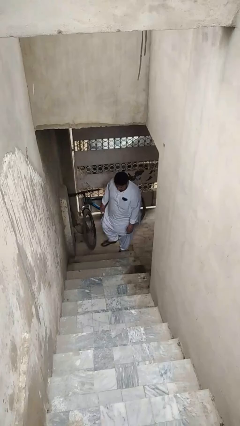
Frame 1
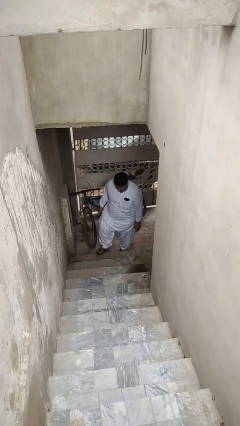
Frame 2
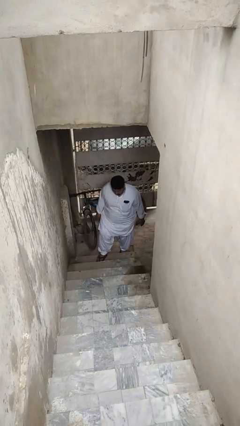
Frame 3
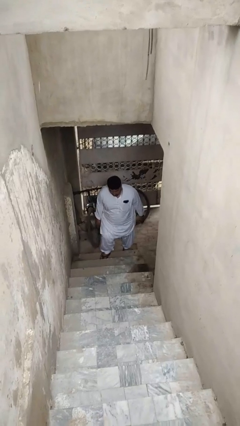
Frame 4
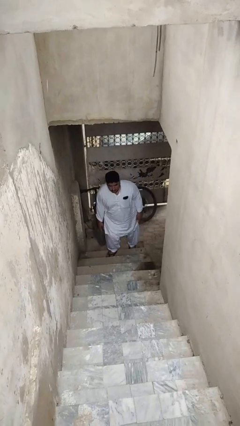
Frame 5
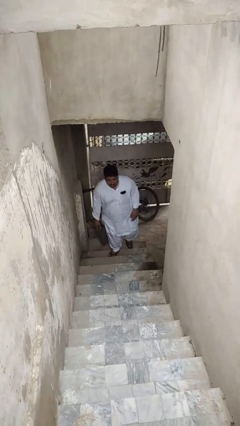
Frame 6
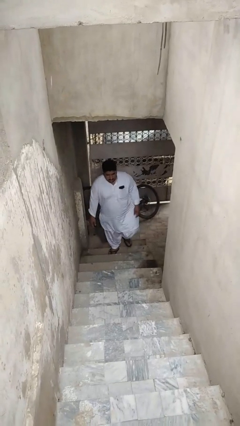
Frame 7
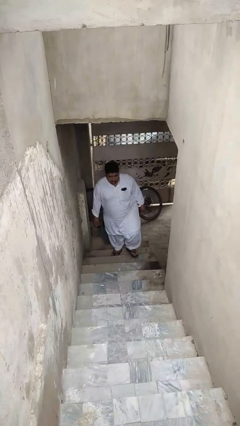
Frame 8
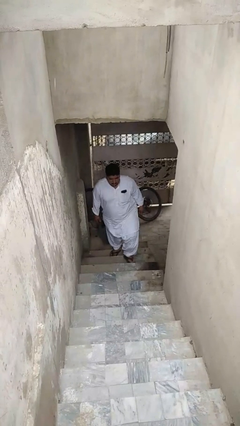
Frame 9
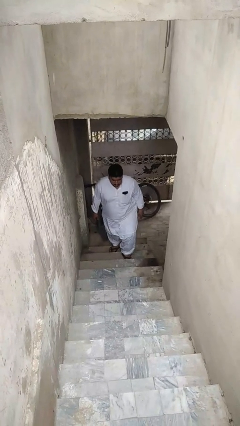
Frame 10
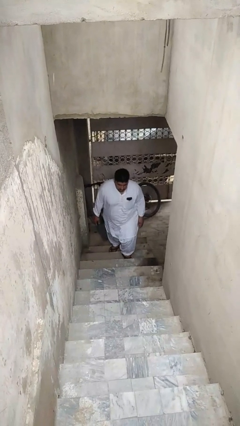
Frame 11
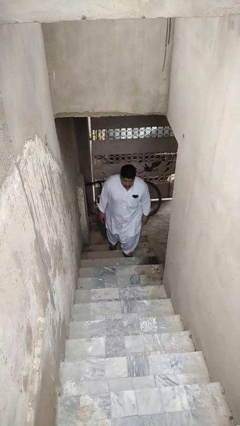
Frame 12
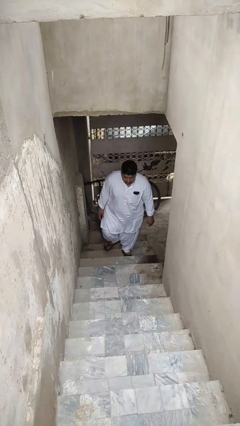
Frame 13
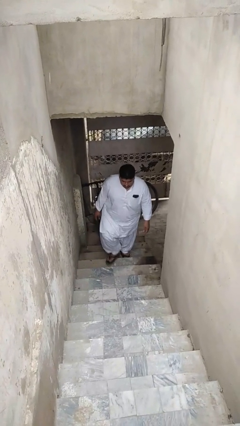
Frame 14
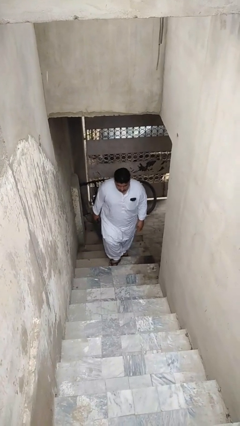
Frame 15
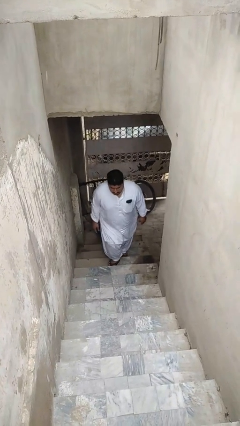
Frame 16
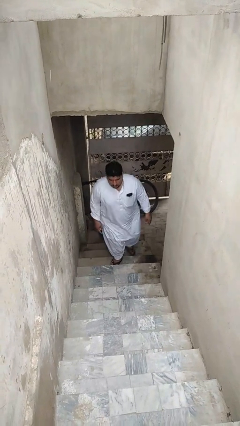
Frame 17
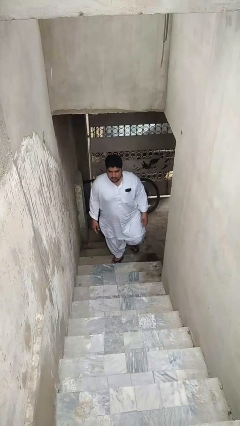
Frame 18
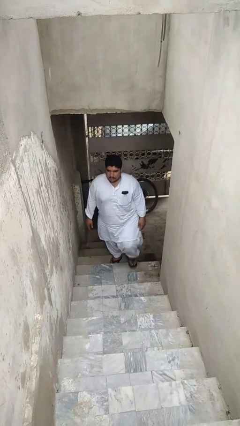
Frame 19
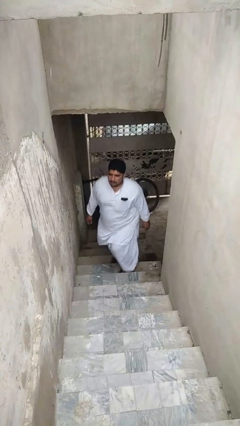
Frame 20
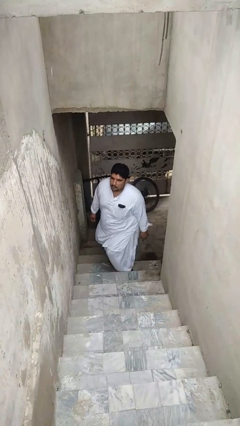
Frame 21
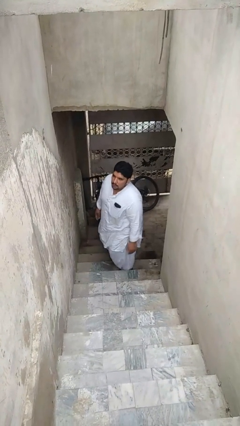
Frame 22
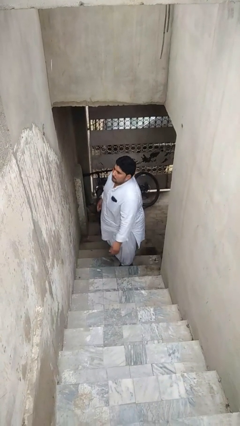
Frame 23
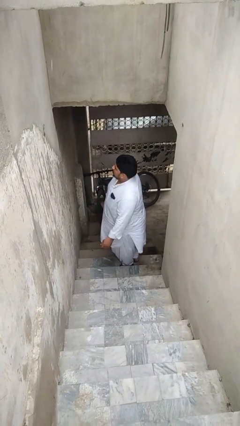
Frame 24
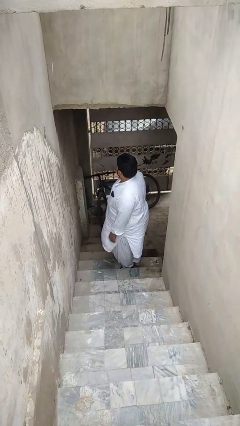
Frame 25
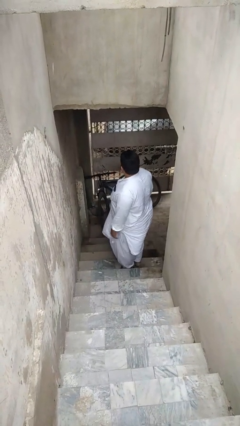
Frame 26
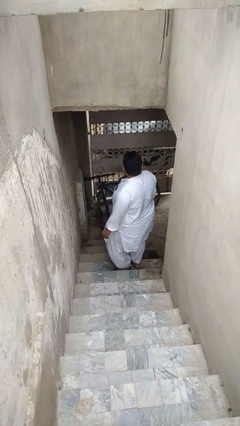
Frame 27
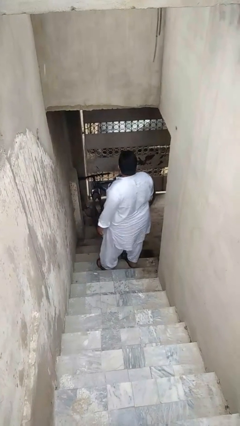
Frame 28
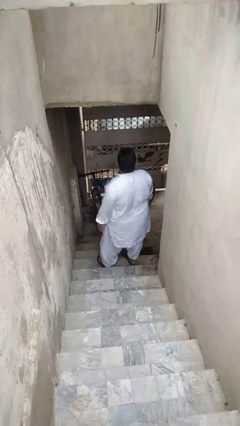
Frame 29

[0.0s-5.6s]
person climbs up stairs

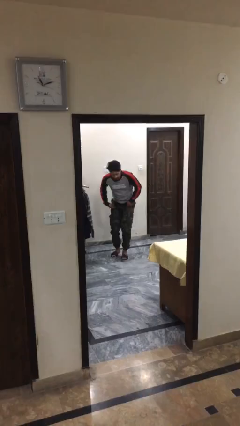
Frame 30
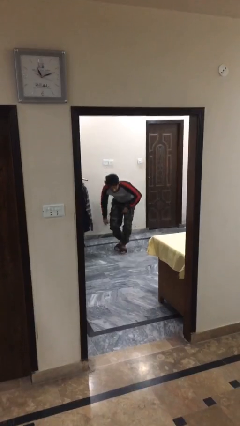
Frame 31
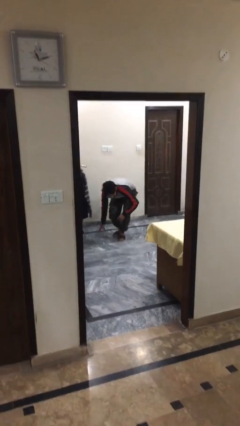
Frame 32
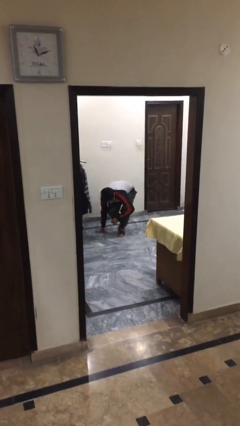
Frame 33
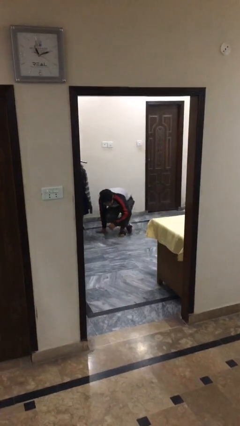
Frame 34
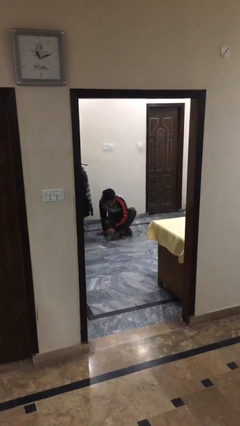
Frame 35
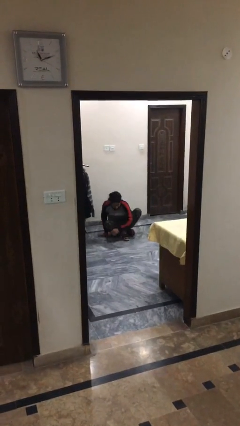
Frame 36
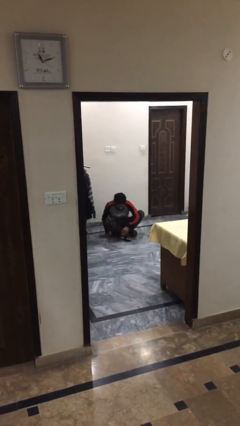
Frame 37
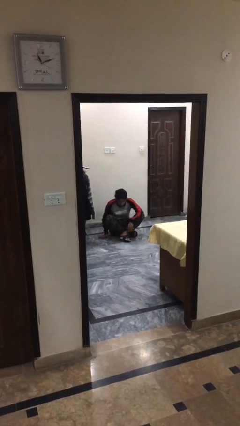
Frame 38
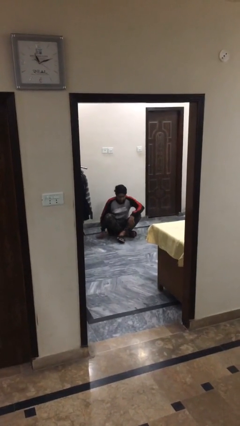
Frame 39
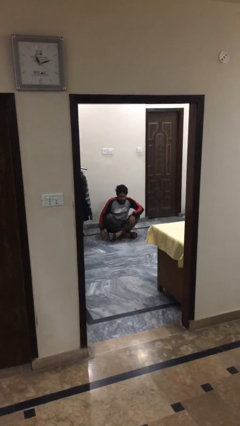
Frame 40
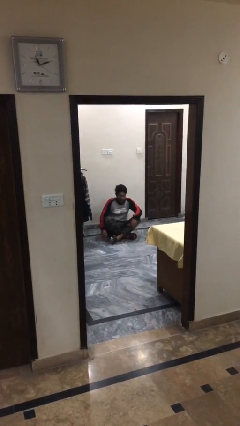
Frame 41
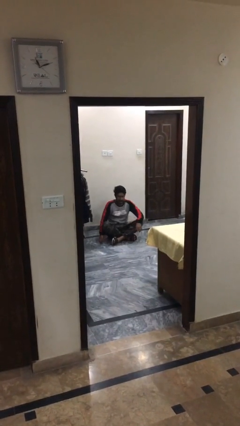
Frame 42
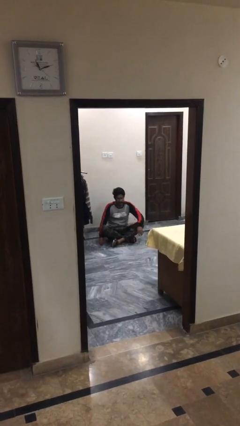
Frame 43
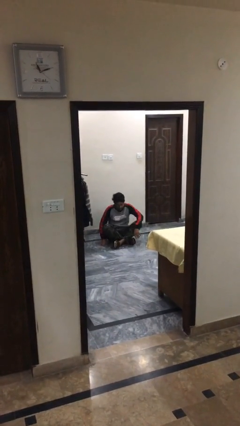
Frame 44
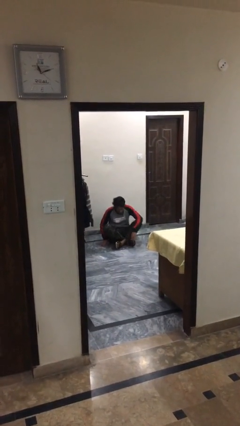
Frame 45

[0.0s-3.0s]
person sits down

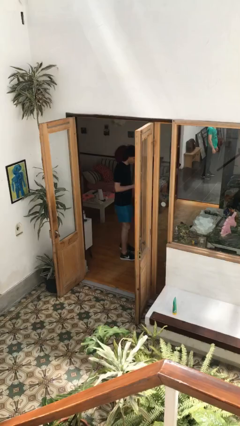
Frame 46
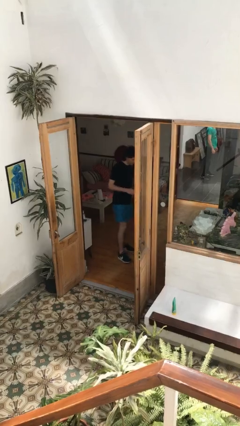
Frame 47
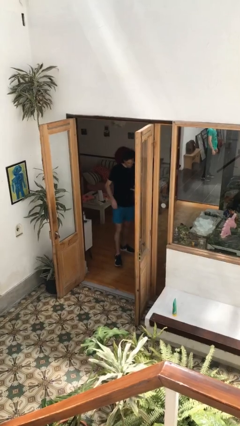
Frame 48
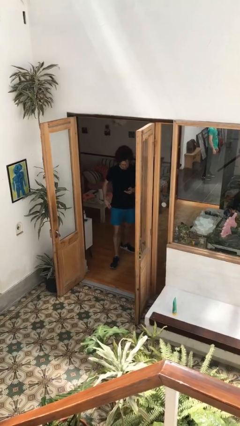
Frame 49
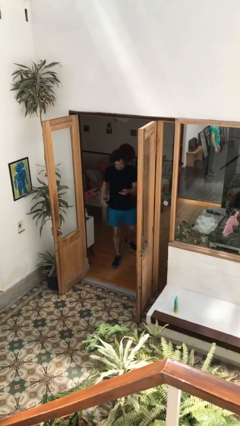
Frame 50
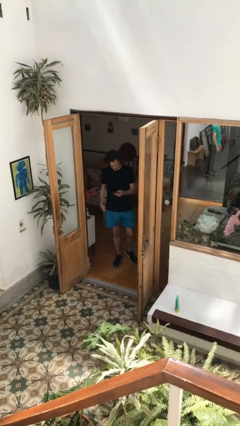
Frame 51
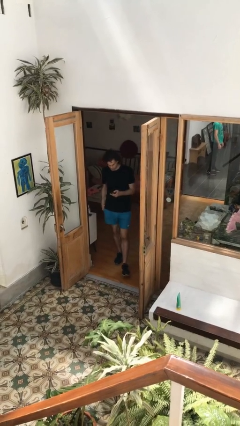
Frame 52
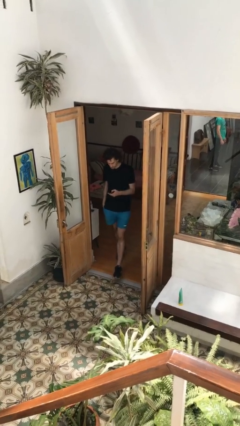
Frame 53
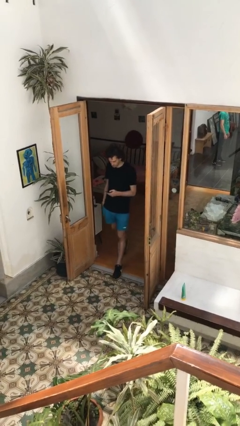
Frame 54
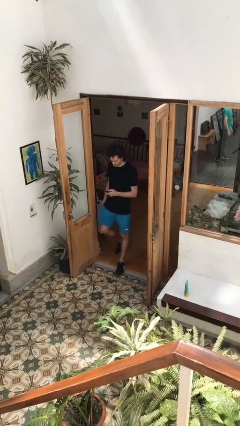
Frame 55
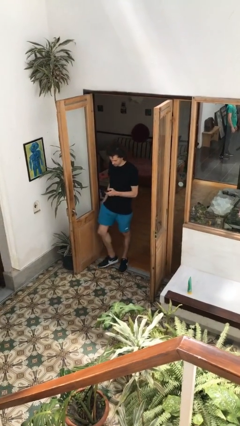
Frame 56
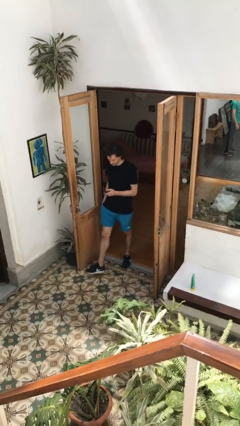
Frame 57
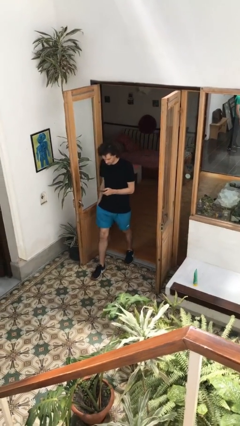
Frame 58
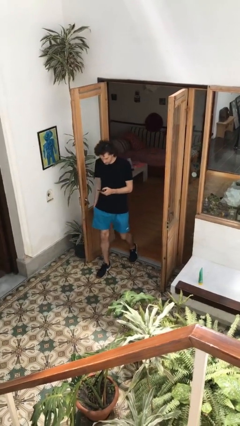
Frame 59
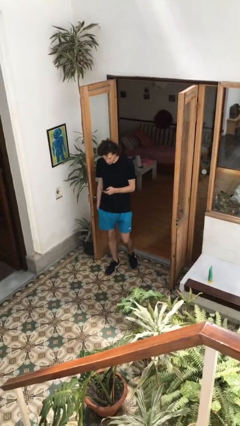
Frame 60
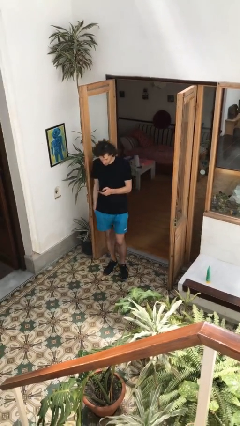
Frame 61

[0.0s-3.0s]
person enters scene through structure

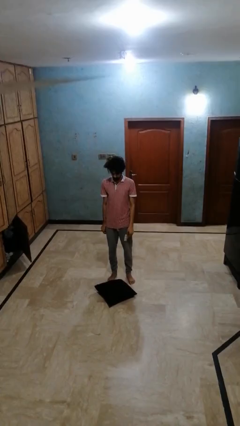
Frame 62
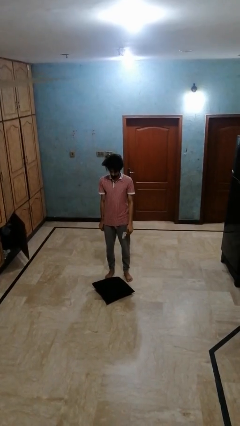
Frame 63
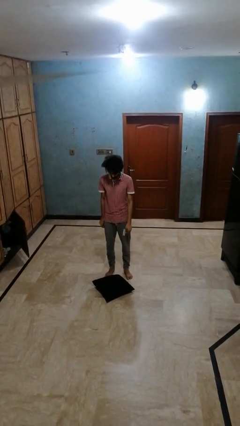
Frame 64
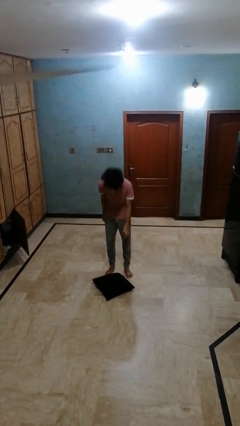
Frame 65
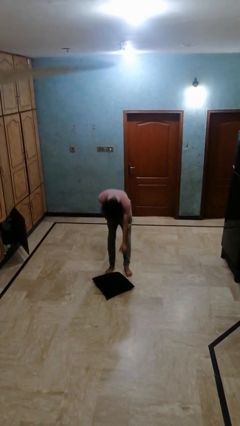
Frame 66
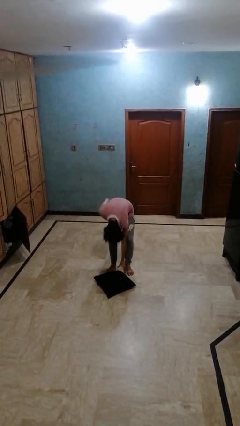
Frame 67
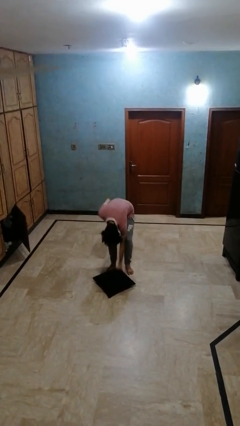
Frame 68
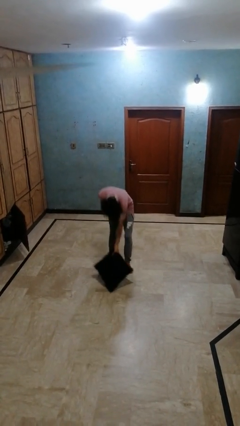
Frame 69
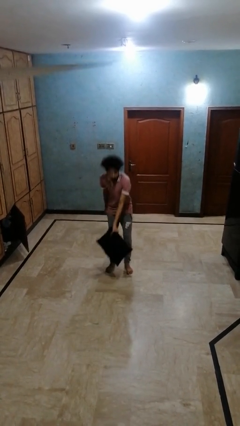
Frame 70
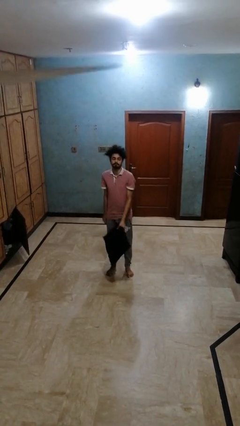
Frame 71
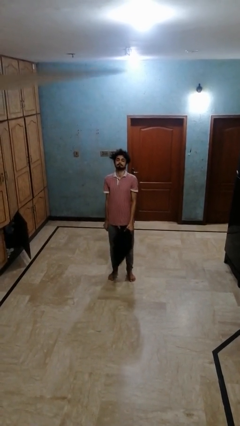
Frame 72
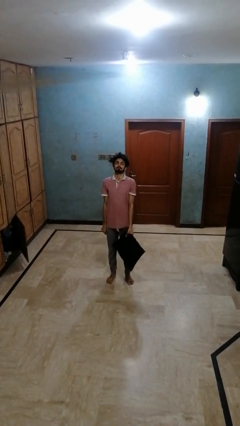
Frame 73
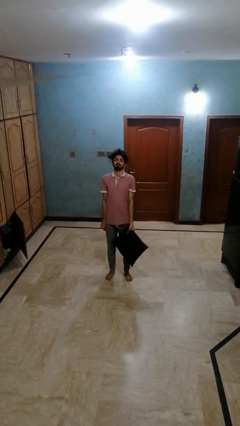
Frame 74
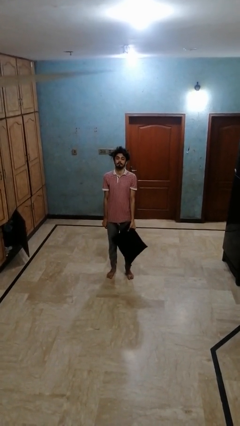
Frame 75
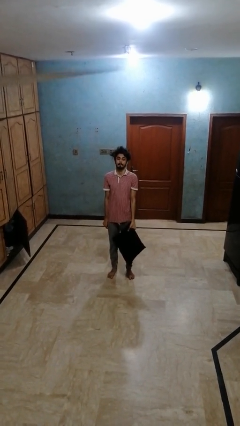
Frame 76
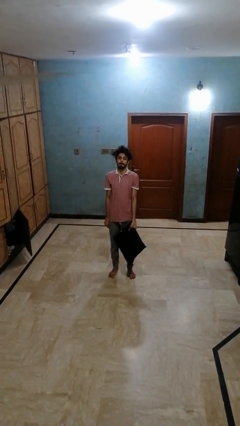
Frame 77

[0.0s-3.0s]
person picks up object from floor

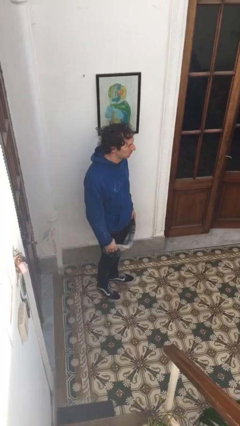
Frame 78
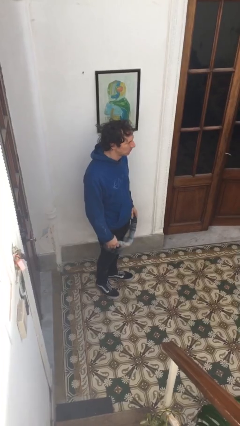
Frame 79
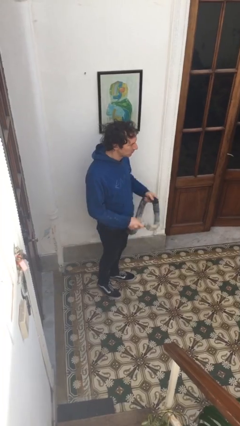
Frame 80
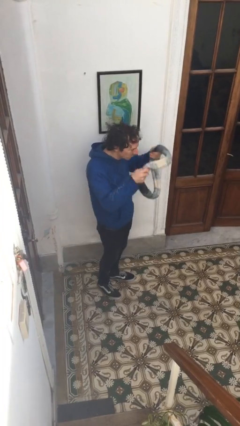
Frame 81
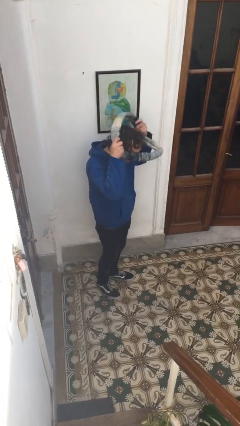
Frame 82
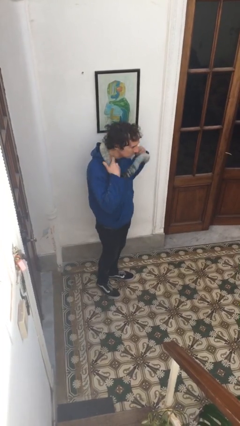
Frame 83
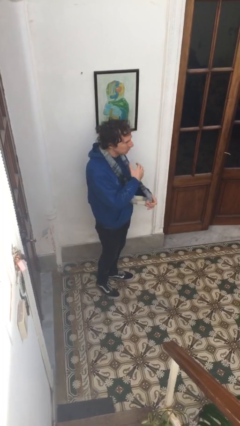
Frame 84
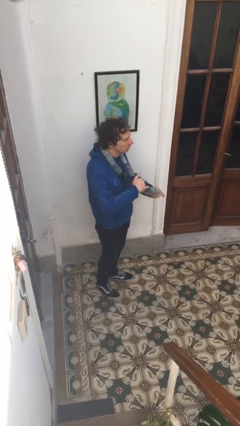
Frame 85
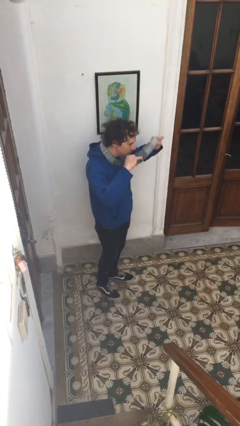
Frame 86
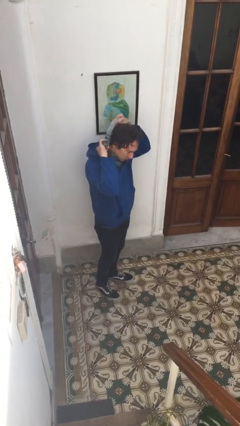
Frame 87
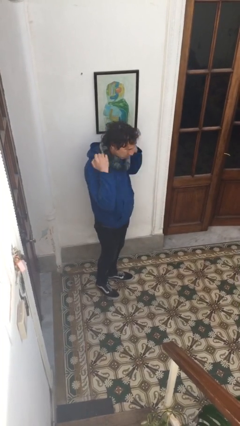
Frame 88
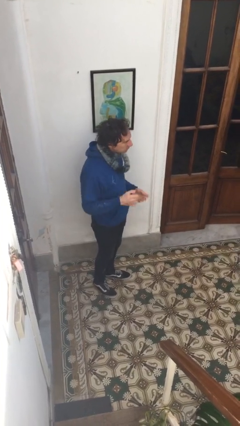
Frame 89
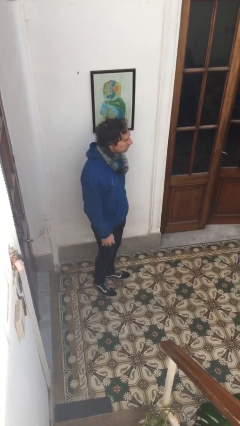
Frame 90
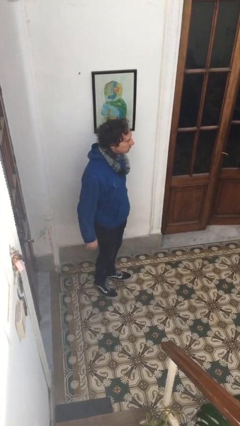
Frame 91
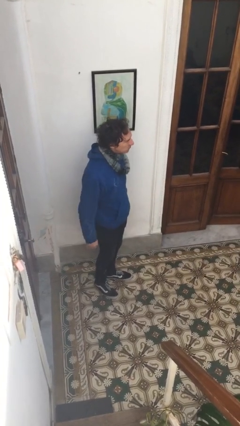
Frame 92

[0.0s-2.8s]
person puts on scarf

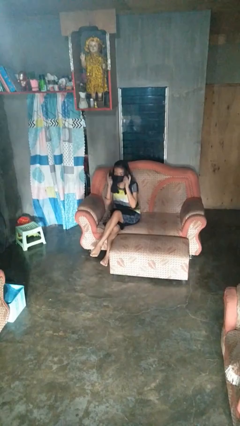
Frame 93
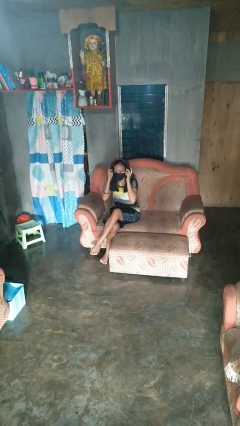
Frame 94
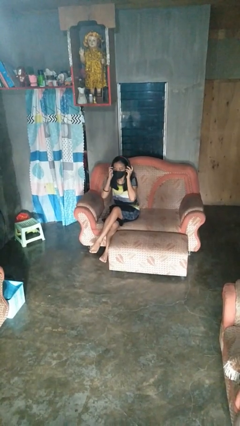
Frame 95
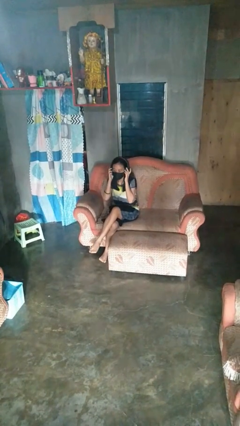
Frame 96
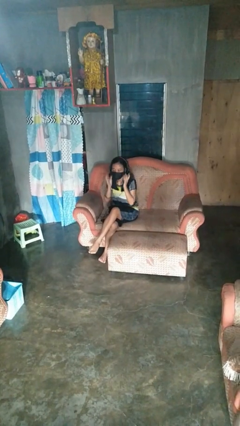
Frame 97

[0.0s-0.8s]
person puts on headphones
